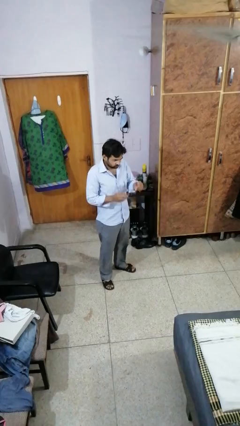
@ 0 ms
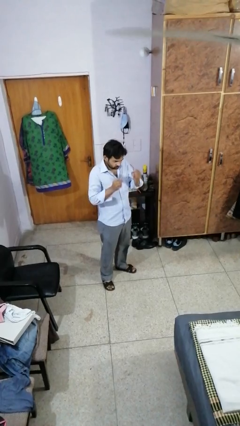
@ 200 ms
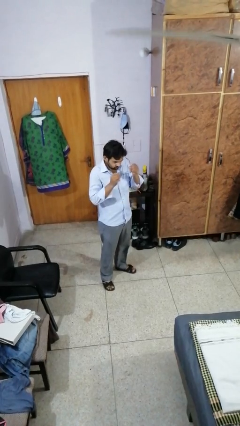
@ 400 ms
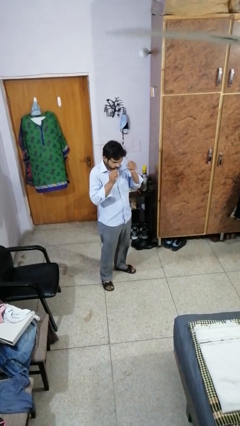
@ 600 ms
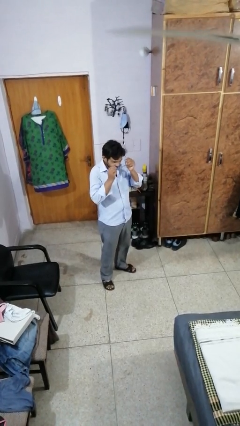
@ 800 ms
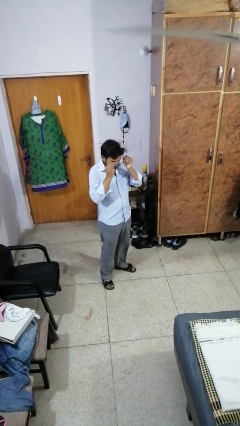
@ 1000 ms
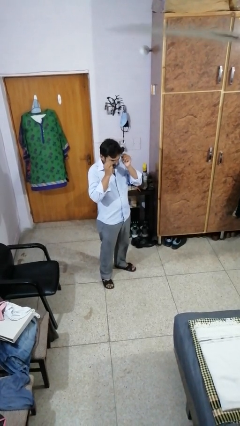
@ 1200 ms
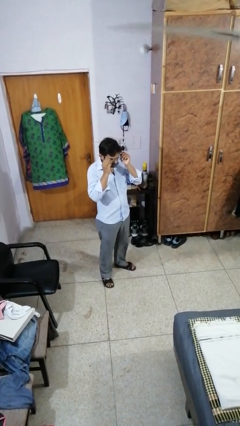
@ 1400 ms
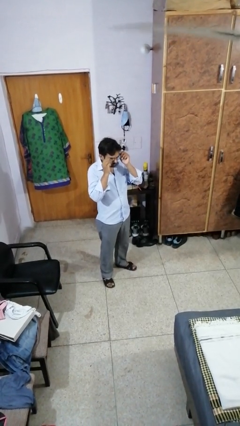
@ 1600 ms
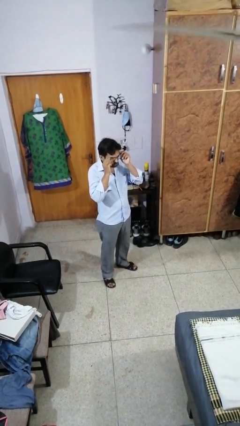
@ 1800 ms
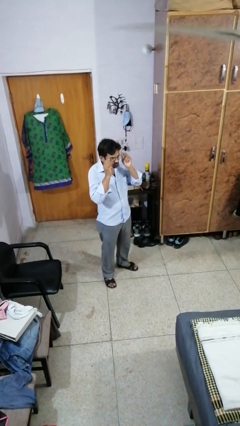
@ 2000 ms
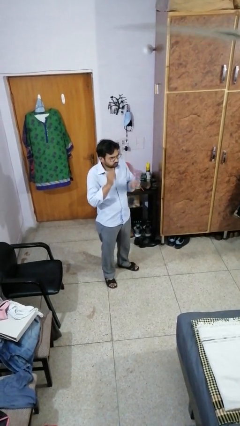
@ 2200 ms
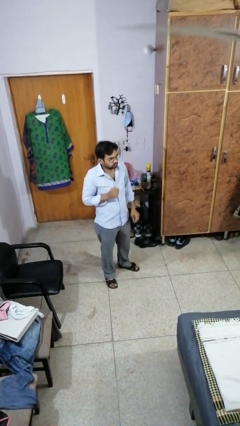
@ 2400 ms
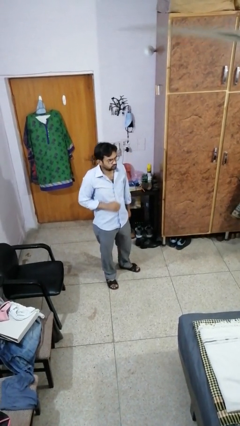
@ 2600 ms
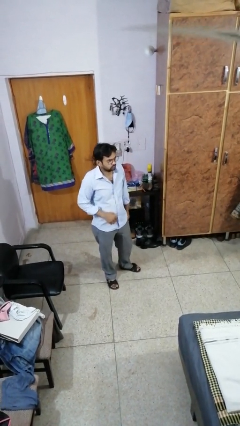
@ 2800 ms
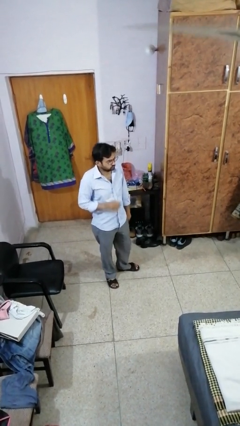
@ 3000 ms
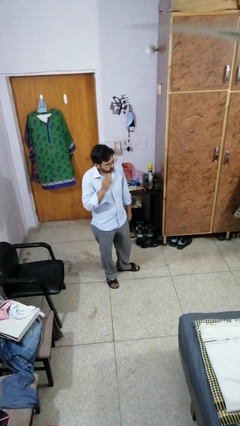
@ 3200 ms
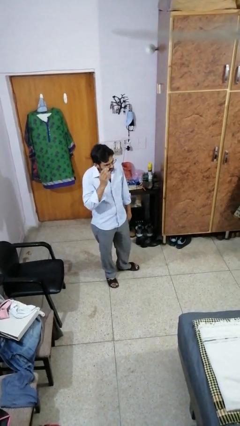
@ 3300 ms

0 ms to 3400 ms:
person puts on glasses

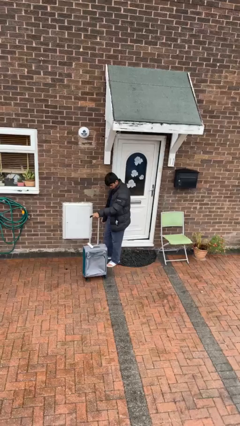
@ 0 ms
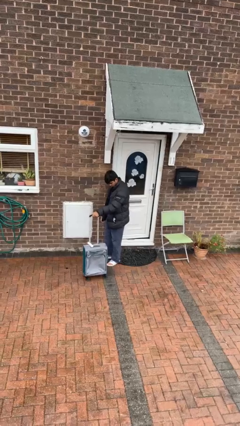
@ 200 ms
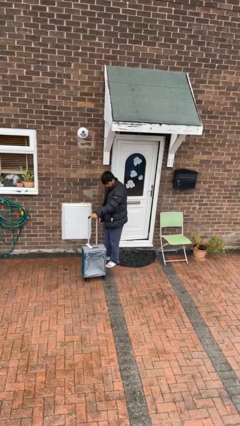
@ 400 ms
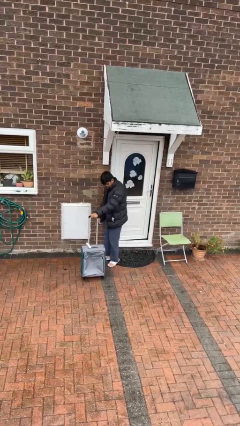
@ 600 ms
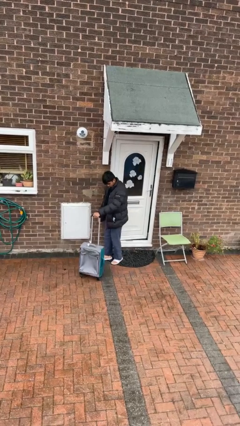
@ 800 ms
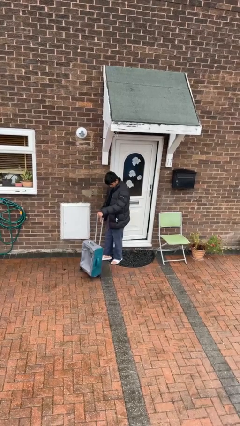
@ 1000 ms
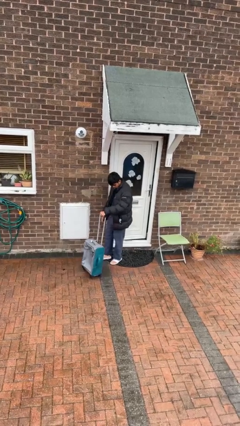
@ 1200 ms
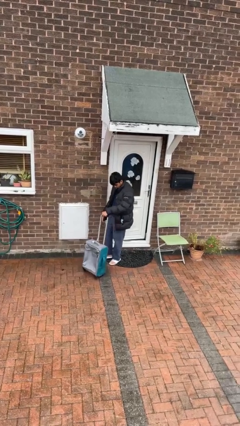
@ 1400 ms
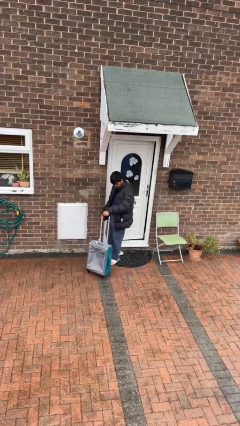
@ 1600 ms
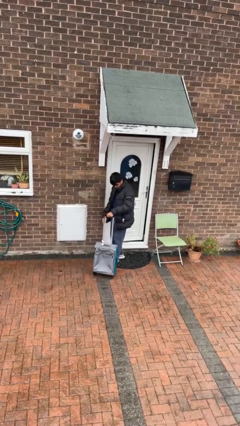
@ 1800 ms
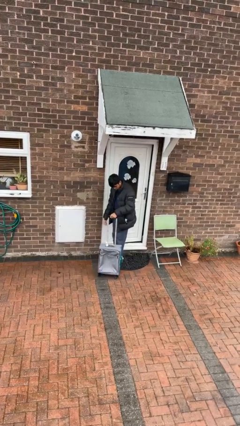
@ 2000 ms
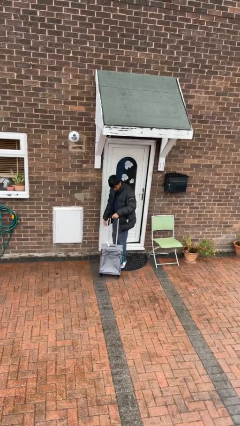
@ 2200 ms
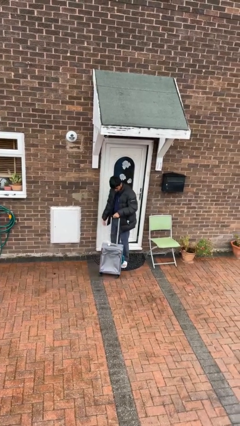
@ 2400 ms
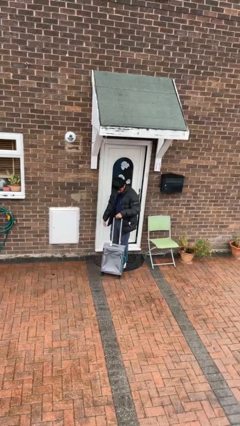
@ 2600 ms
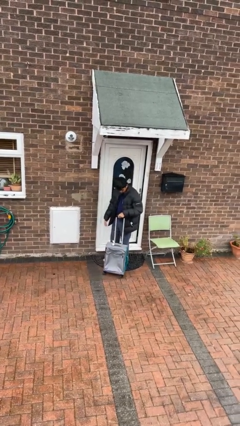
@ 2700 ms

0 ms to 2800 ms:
person pulls wheeled cart

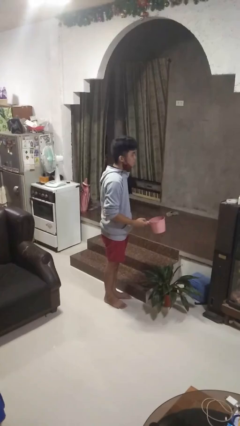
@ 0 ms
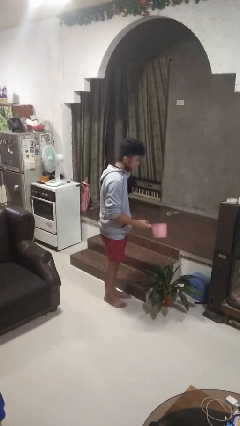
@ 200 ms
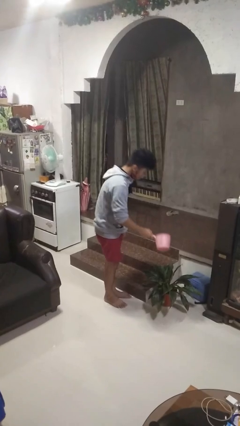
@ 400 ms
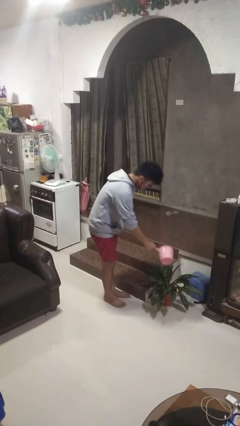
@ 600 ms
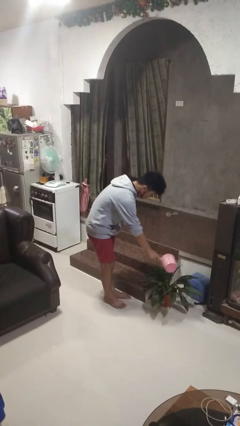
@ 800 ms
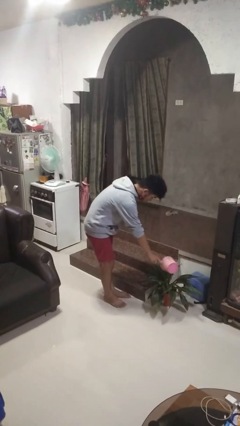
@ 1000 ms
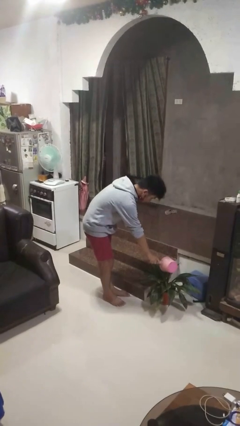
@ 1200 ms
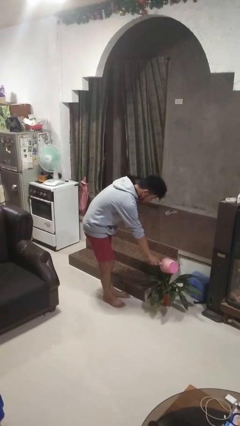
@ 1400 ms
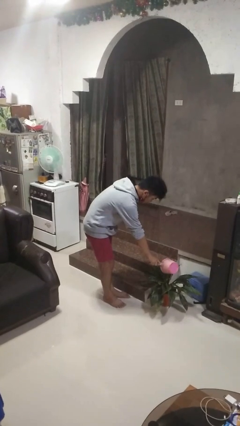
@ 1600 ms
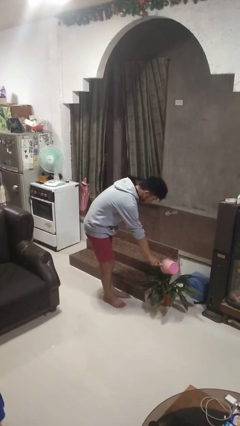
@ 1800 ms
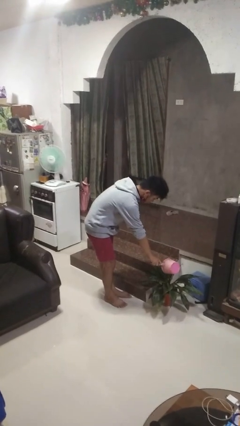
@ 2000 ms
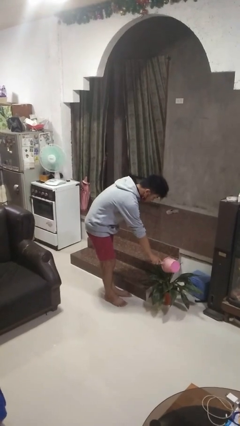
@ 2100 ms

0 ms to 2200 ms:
person waters houseplant

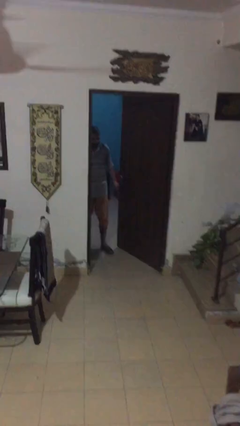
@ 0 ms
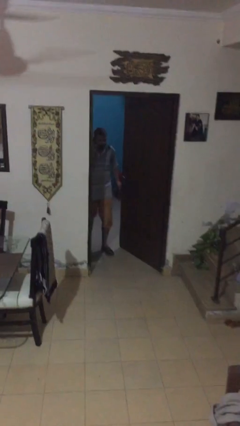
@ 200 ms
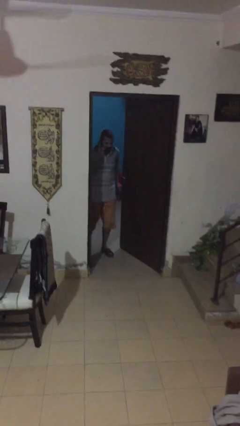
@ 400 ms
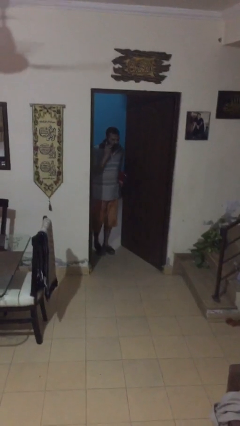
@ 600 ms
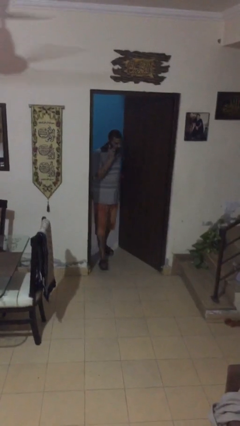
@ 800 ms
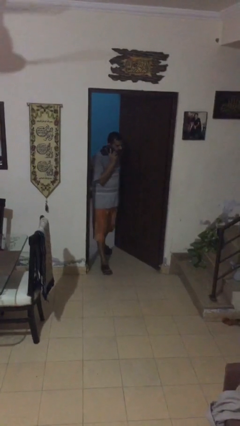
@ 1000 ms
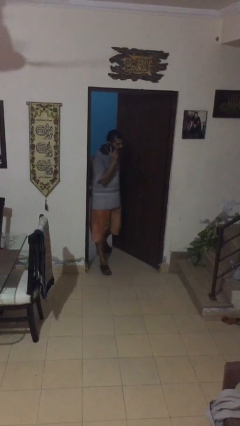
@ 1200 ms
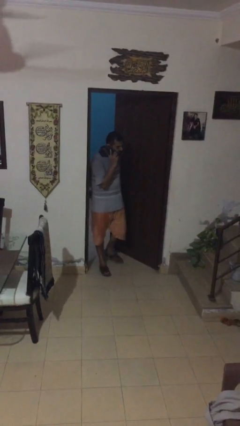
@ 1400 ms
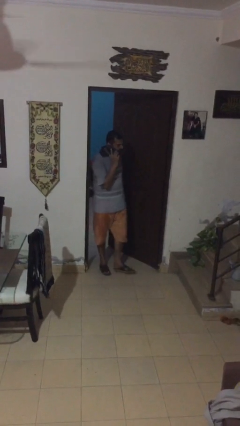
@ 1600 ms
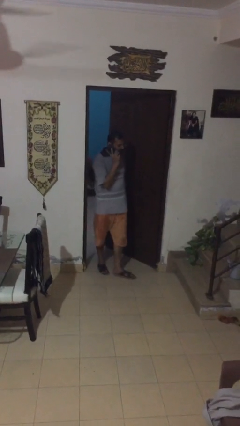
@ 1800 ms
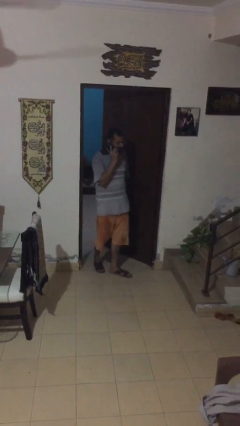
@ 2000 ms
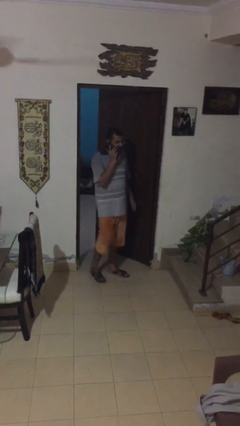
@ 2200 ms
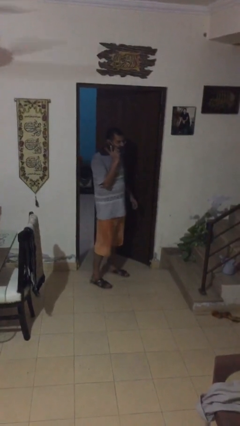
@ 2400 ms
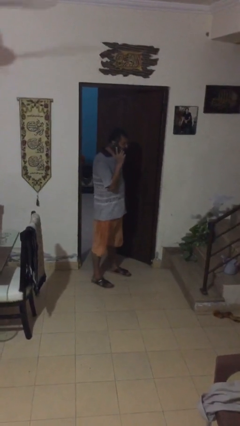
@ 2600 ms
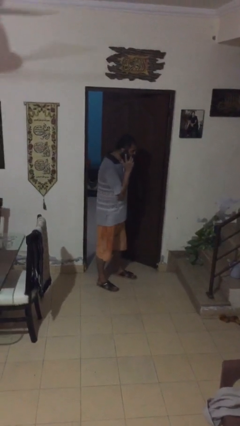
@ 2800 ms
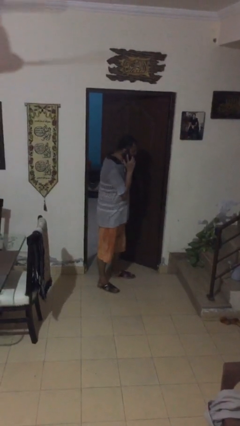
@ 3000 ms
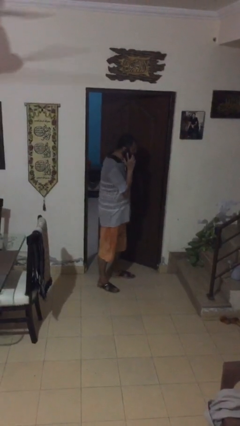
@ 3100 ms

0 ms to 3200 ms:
person enters scene through structure

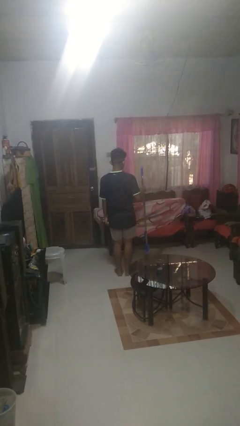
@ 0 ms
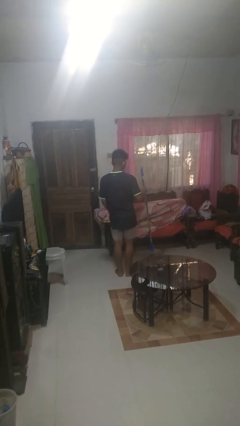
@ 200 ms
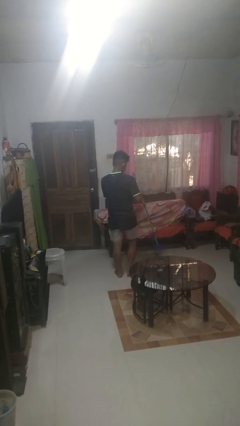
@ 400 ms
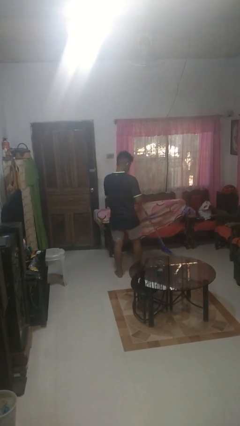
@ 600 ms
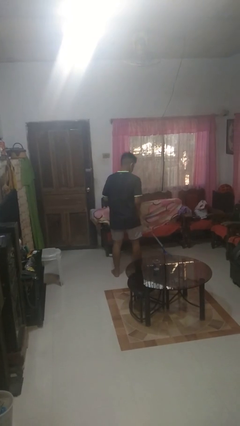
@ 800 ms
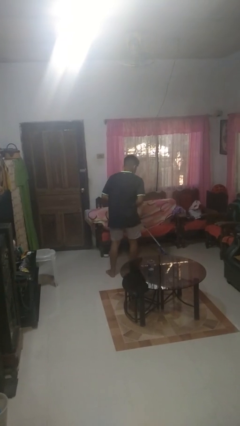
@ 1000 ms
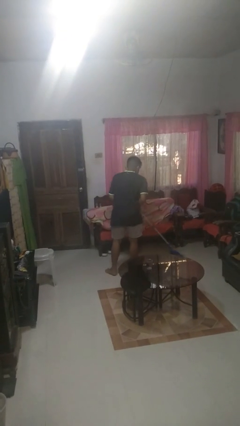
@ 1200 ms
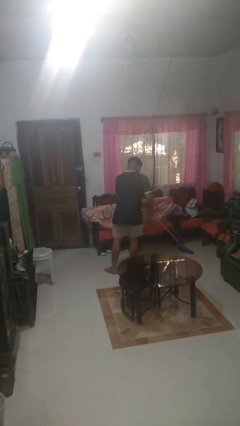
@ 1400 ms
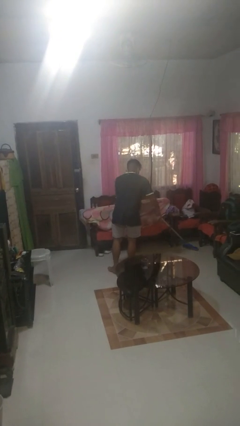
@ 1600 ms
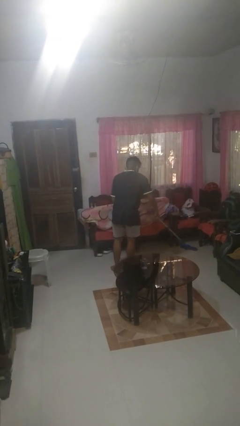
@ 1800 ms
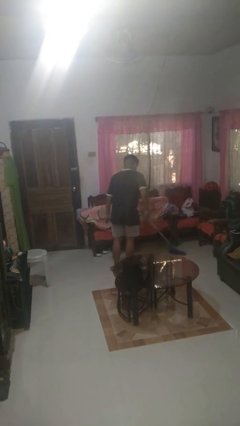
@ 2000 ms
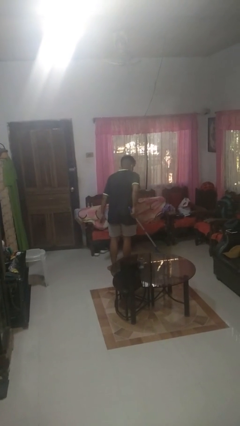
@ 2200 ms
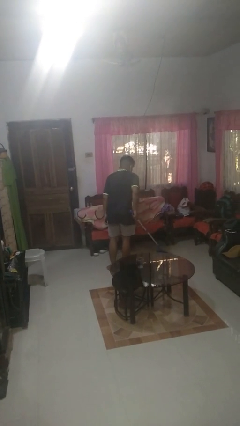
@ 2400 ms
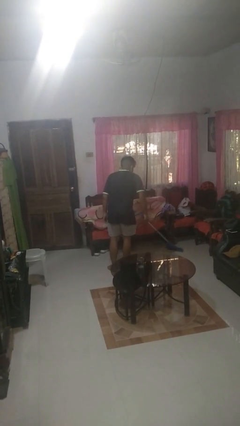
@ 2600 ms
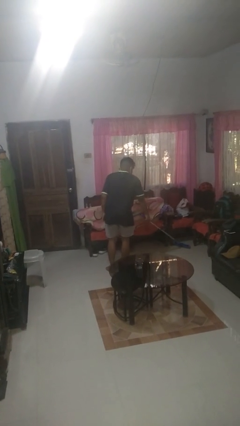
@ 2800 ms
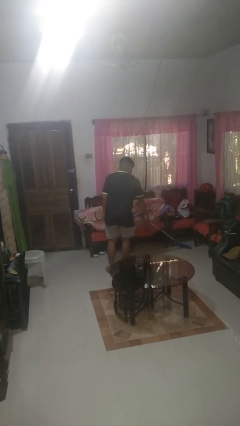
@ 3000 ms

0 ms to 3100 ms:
person mops

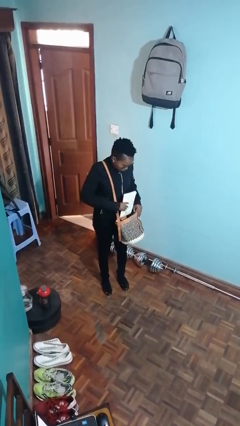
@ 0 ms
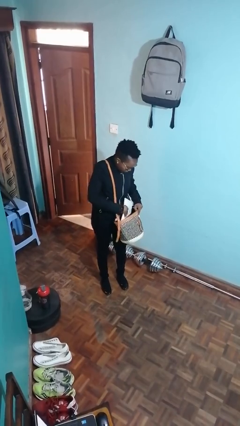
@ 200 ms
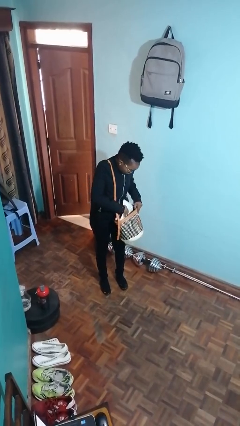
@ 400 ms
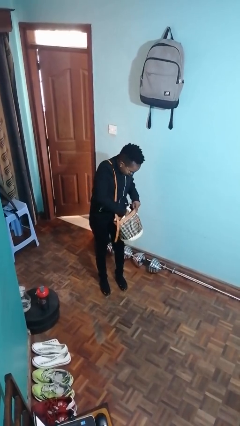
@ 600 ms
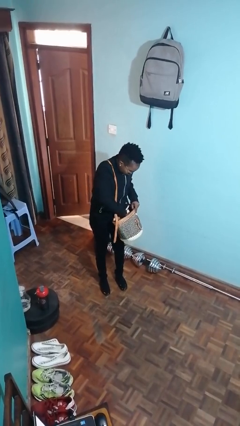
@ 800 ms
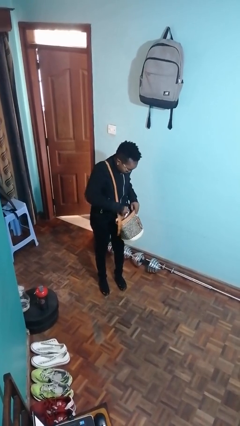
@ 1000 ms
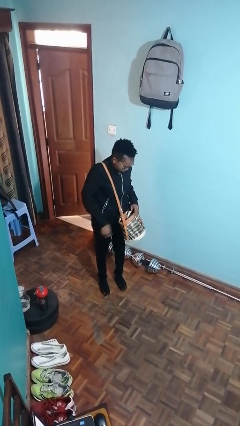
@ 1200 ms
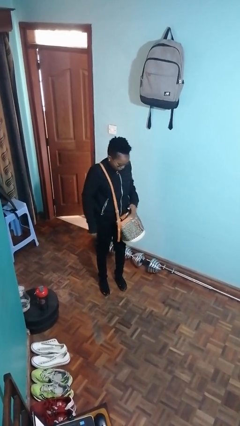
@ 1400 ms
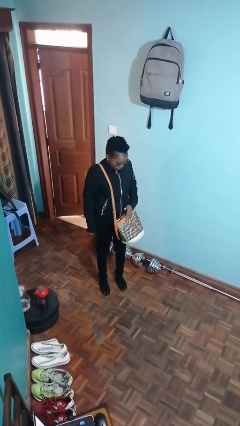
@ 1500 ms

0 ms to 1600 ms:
person puts object into purse

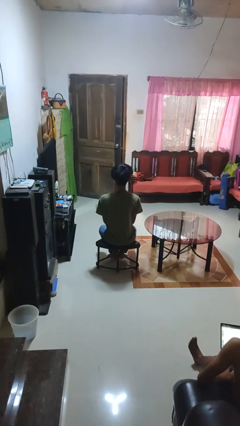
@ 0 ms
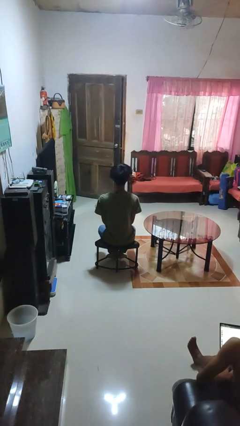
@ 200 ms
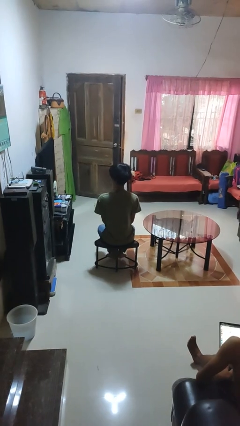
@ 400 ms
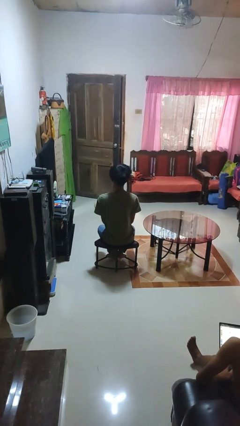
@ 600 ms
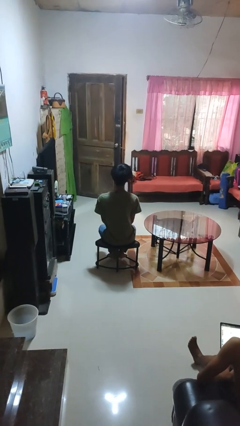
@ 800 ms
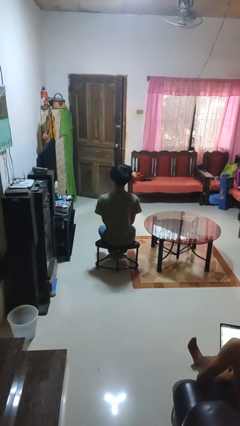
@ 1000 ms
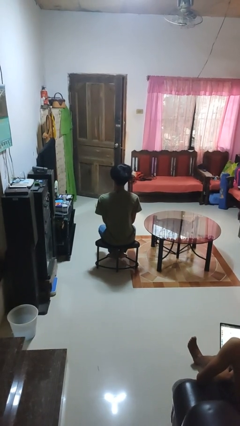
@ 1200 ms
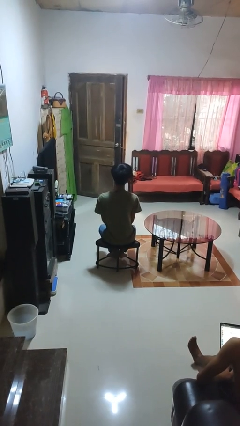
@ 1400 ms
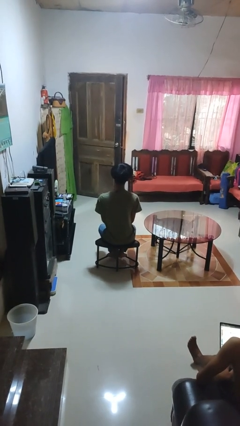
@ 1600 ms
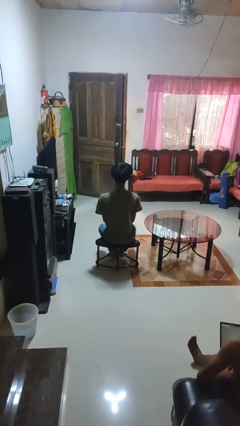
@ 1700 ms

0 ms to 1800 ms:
person shakes head
